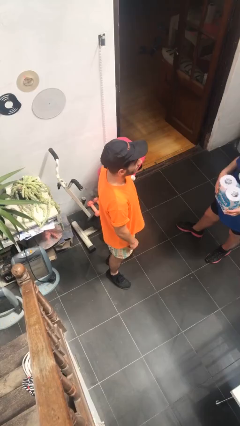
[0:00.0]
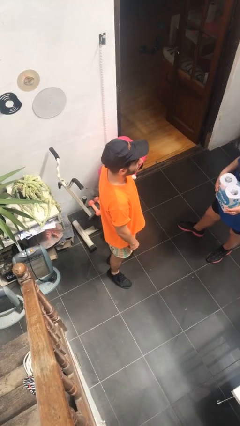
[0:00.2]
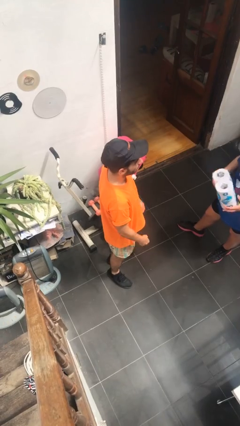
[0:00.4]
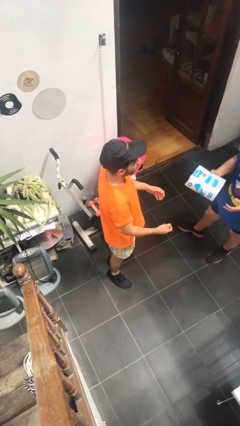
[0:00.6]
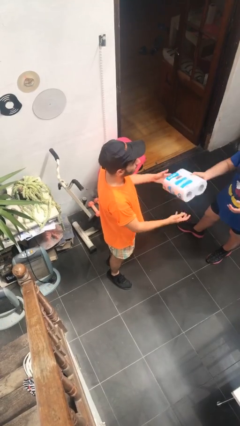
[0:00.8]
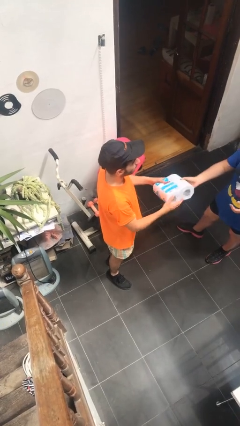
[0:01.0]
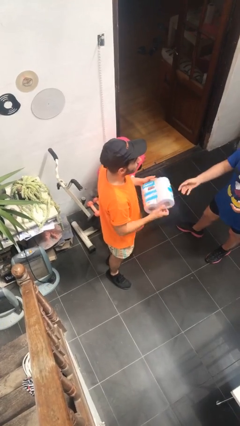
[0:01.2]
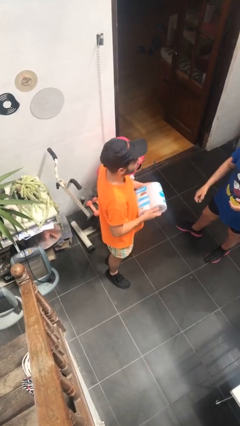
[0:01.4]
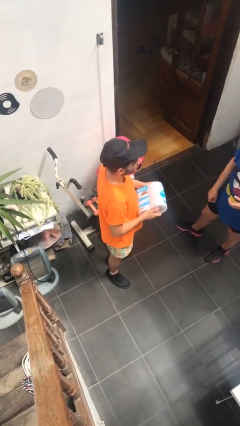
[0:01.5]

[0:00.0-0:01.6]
person transfers object to person

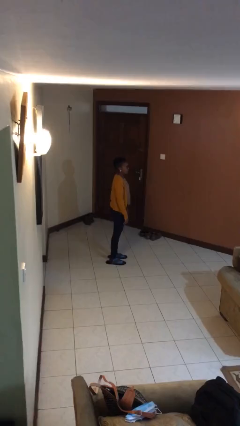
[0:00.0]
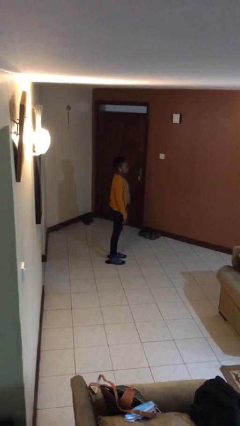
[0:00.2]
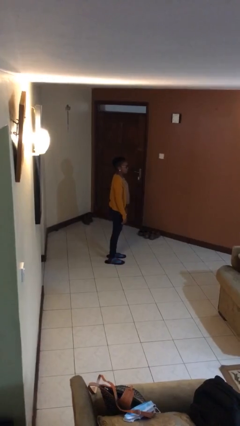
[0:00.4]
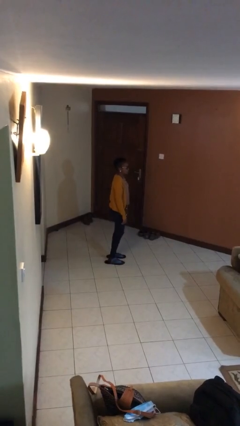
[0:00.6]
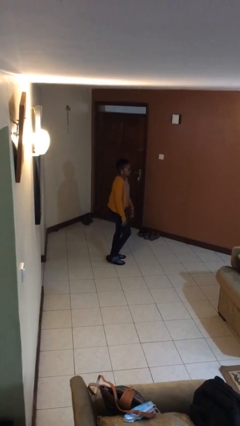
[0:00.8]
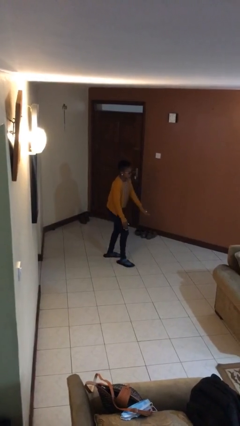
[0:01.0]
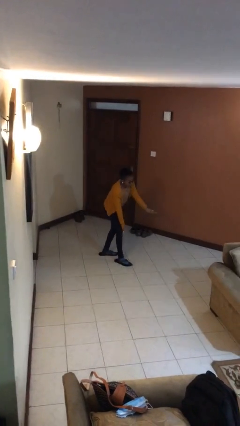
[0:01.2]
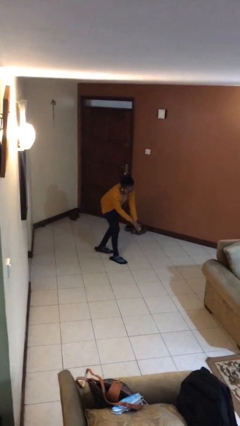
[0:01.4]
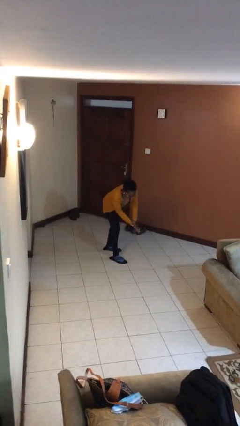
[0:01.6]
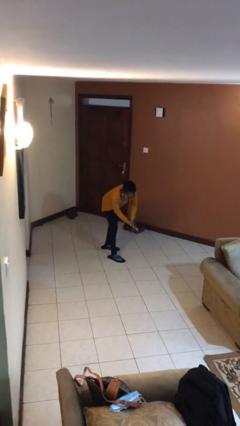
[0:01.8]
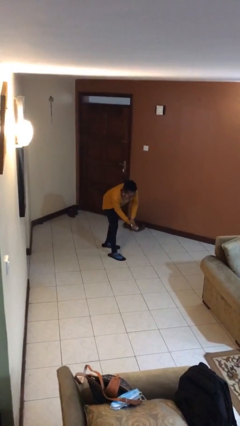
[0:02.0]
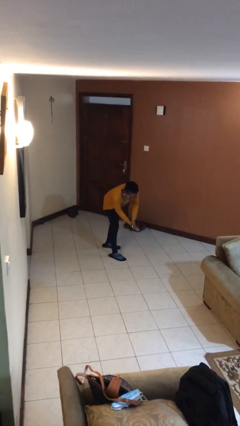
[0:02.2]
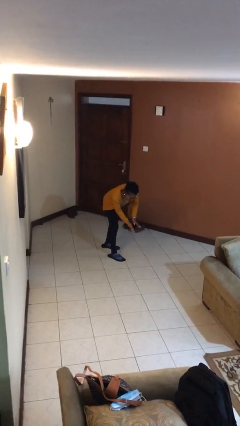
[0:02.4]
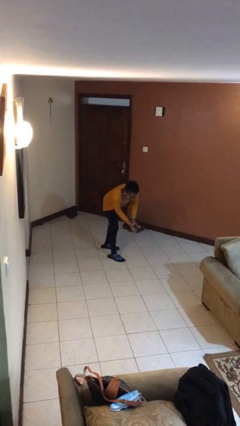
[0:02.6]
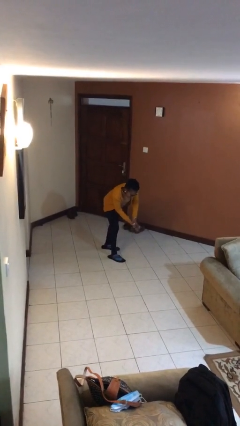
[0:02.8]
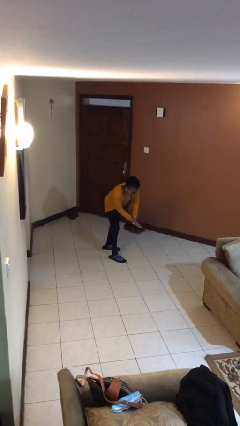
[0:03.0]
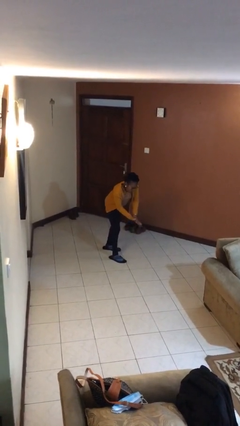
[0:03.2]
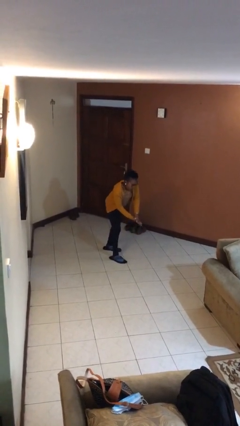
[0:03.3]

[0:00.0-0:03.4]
person claps hands

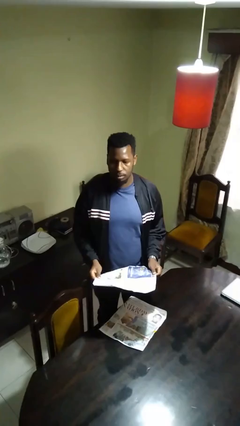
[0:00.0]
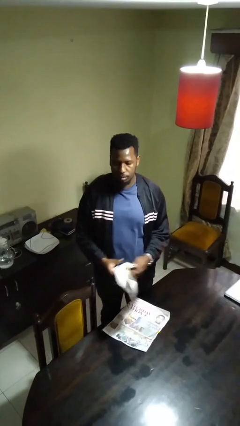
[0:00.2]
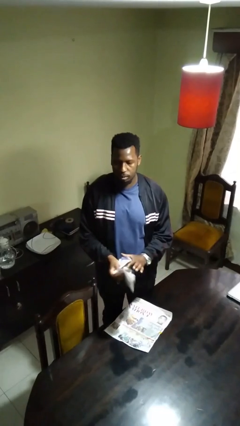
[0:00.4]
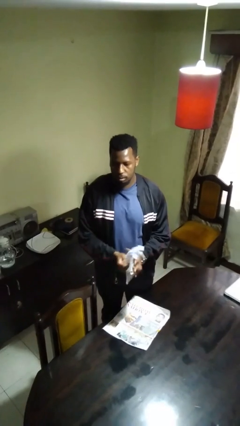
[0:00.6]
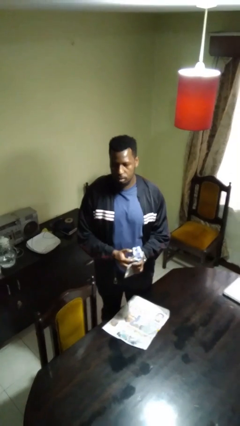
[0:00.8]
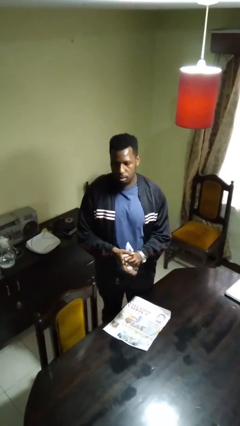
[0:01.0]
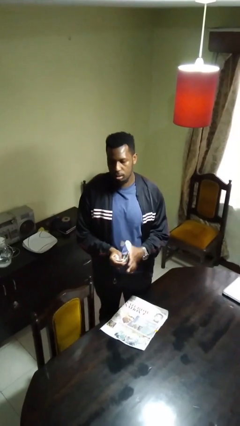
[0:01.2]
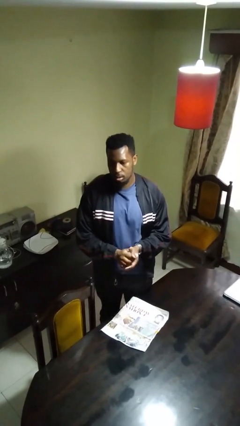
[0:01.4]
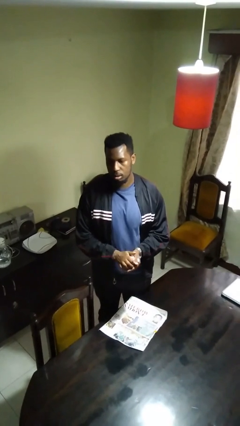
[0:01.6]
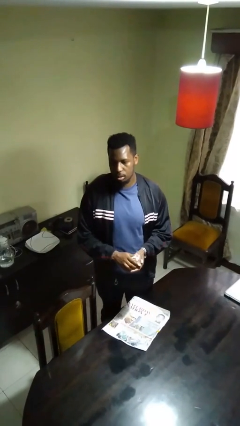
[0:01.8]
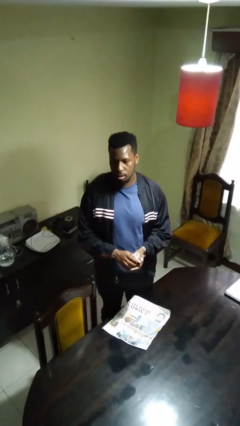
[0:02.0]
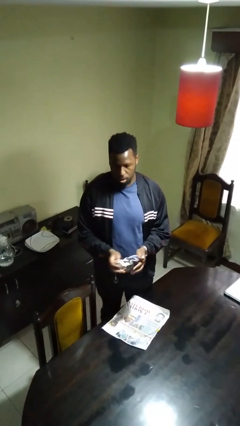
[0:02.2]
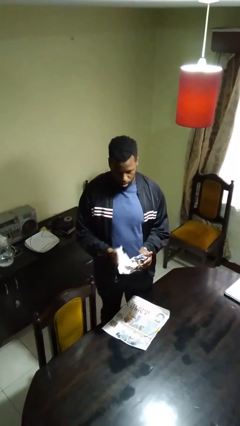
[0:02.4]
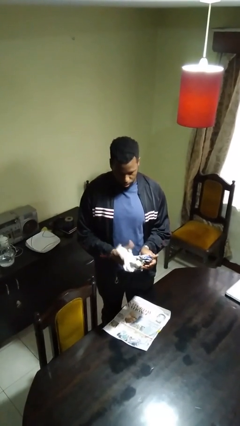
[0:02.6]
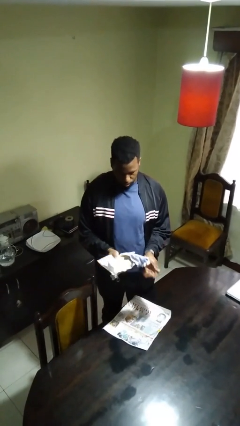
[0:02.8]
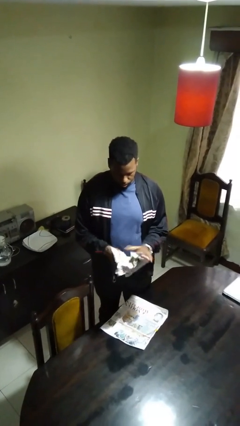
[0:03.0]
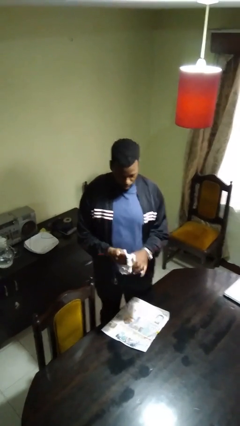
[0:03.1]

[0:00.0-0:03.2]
person crumples paper

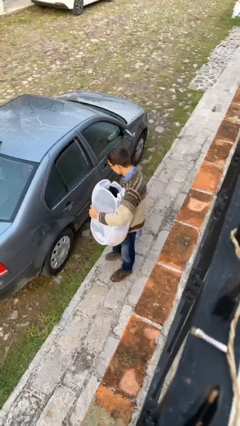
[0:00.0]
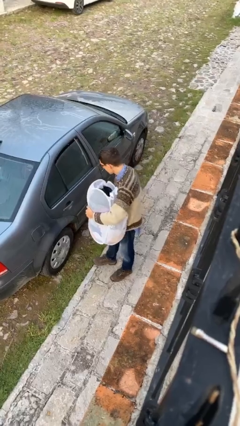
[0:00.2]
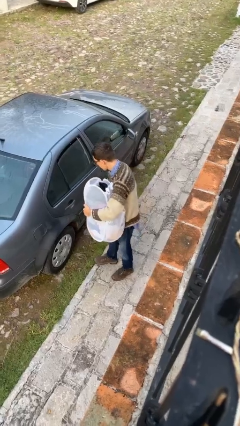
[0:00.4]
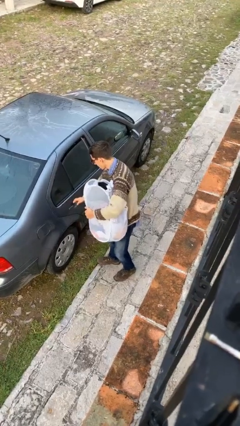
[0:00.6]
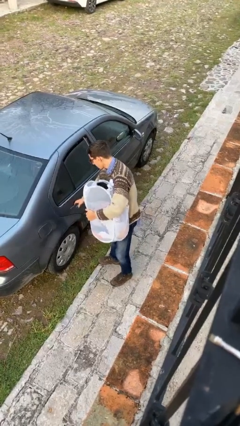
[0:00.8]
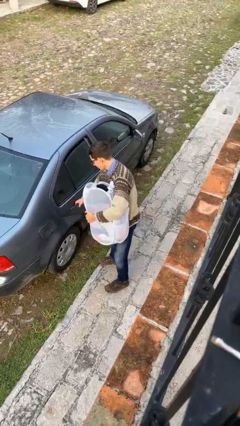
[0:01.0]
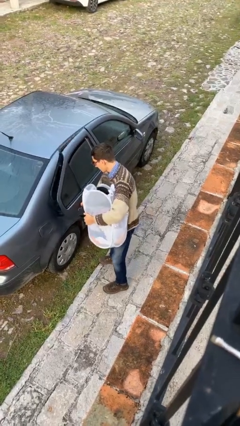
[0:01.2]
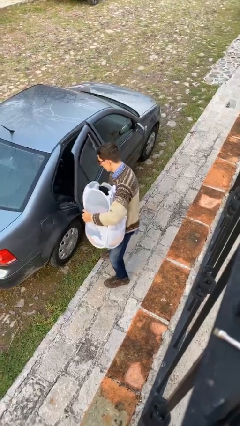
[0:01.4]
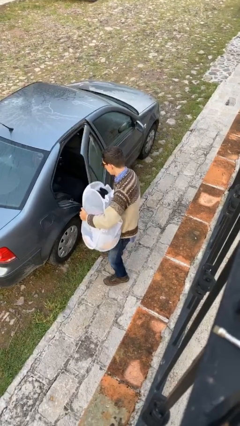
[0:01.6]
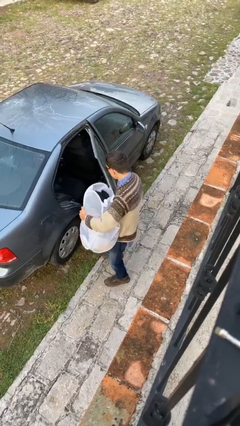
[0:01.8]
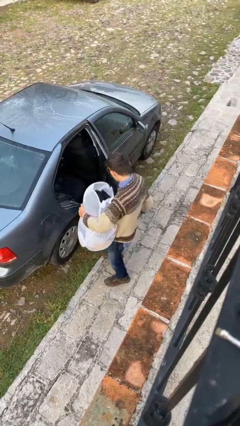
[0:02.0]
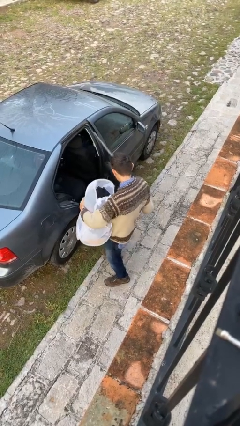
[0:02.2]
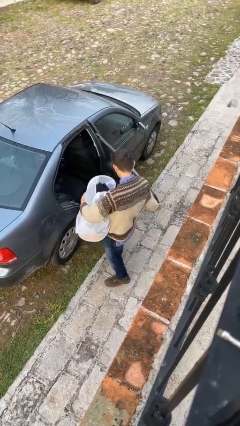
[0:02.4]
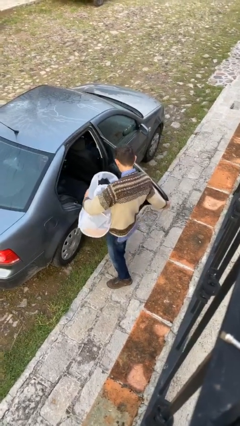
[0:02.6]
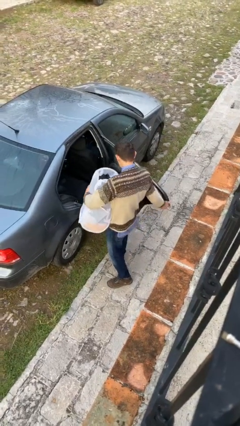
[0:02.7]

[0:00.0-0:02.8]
person opens car door

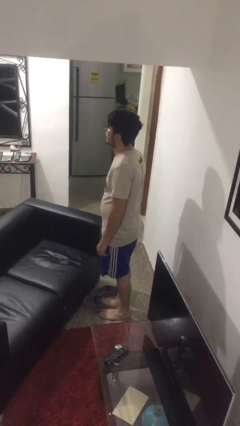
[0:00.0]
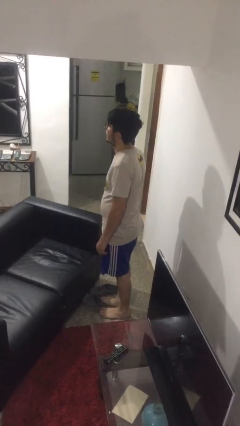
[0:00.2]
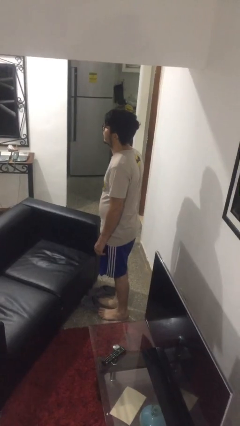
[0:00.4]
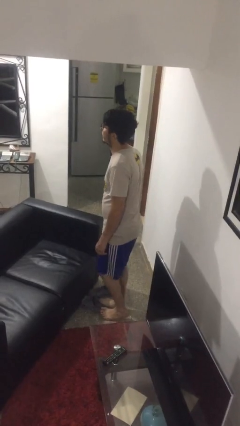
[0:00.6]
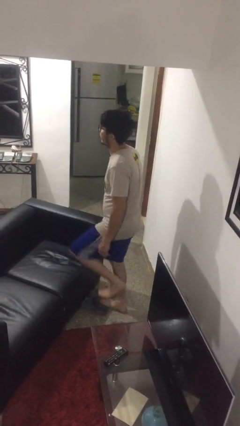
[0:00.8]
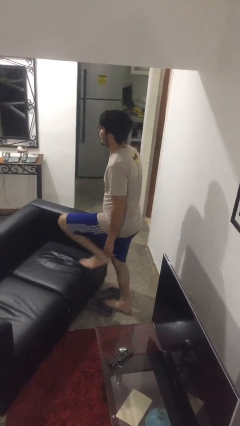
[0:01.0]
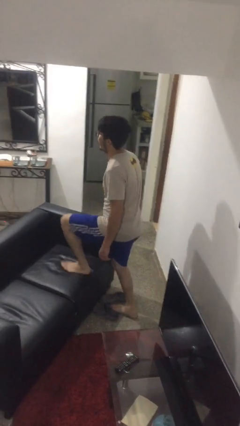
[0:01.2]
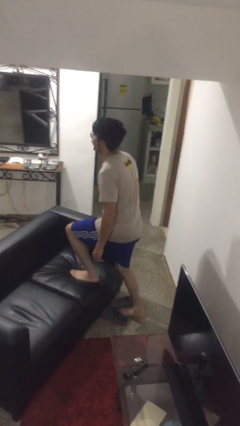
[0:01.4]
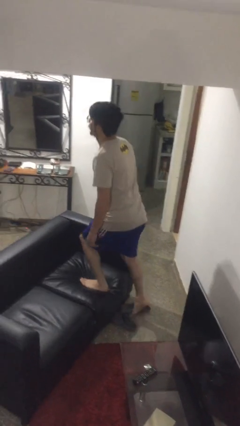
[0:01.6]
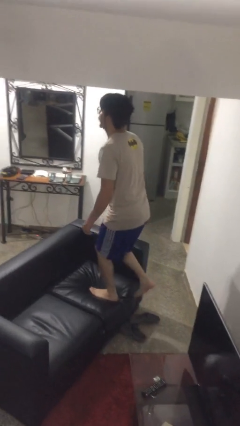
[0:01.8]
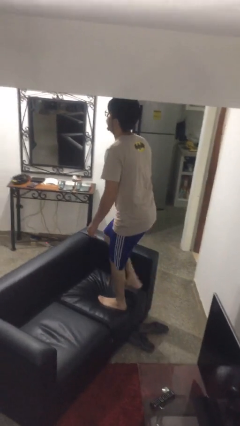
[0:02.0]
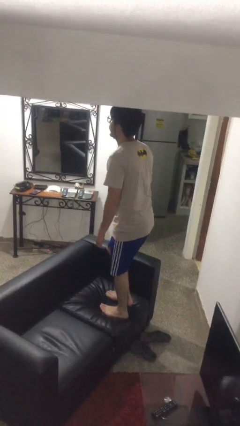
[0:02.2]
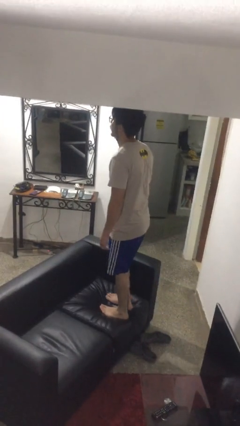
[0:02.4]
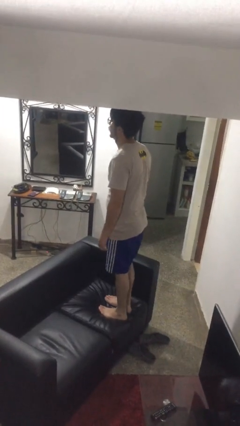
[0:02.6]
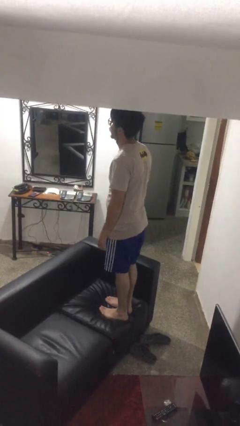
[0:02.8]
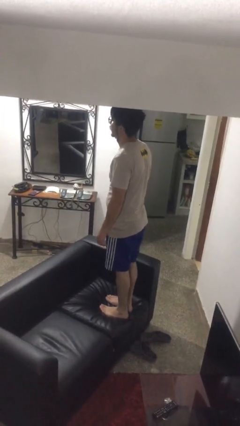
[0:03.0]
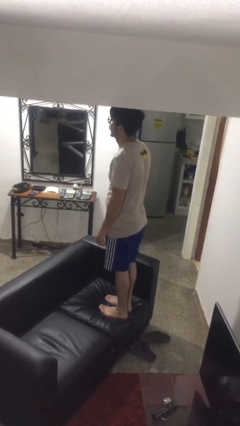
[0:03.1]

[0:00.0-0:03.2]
person climbs on couch

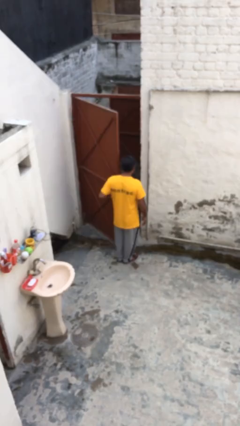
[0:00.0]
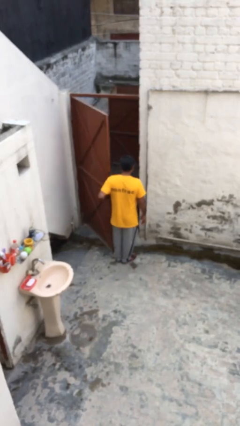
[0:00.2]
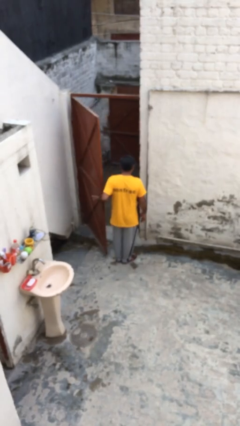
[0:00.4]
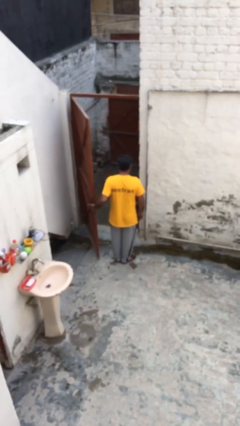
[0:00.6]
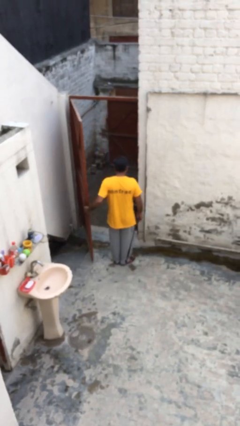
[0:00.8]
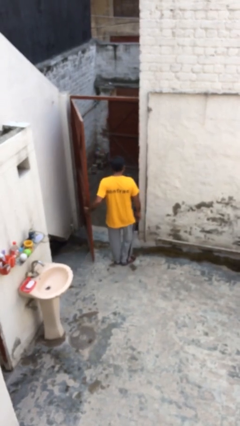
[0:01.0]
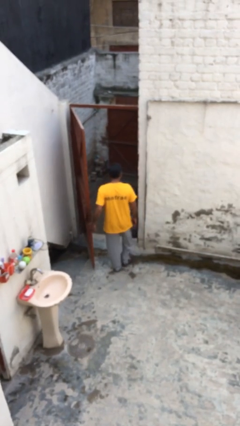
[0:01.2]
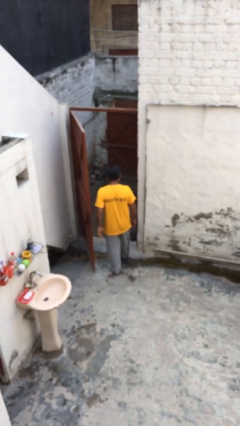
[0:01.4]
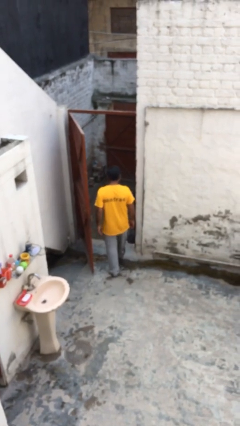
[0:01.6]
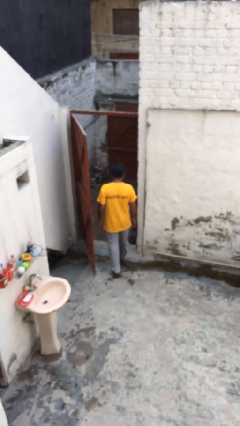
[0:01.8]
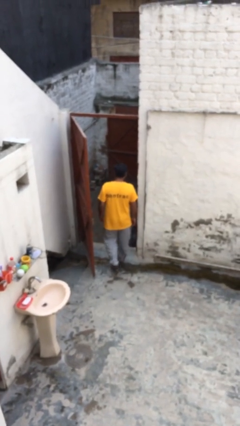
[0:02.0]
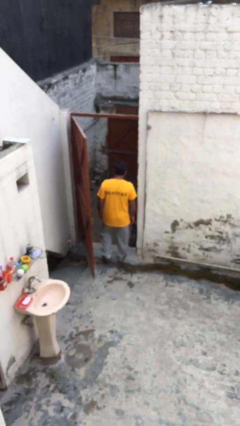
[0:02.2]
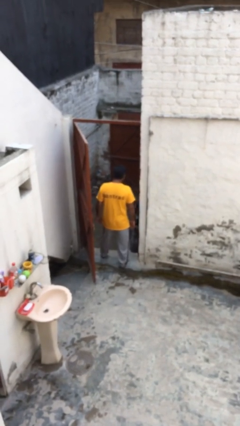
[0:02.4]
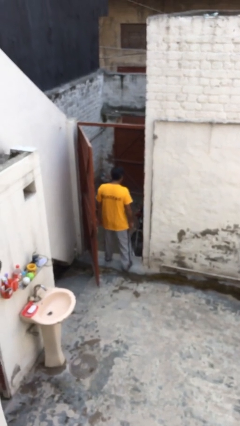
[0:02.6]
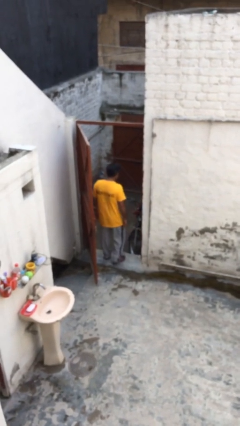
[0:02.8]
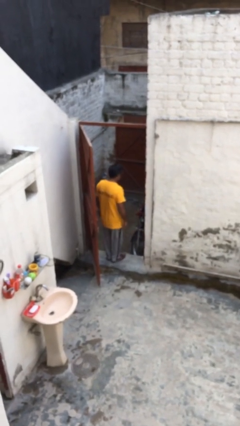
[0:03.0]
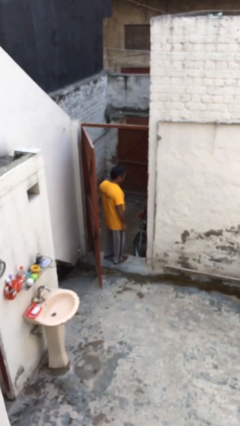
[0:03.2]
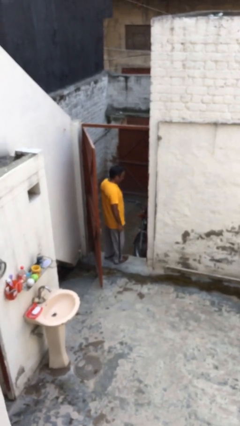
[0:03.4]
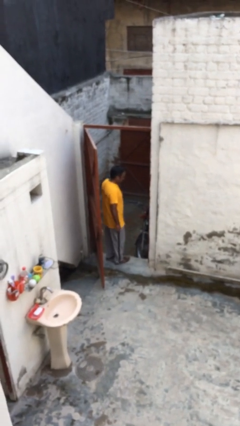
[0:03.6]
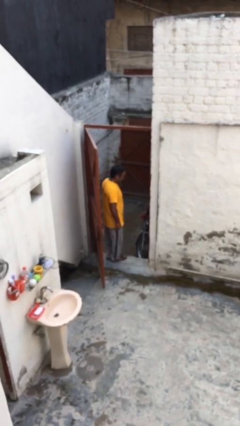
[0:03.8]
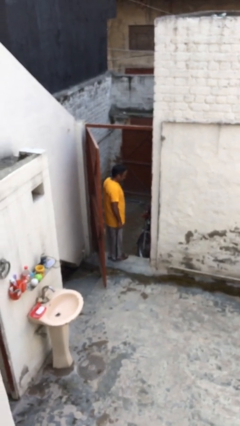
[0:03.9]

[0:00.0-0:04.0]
person exits scene through structure
